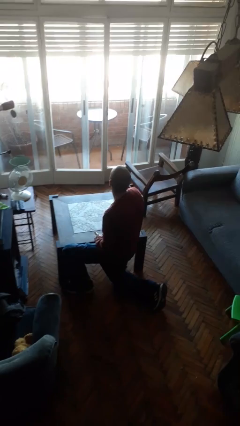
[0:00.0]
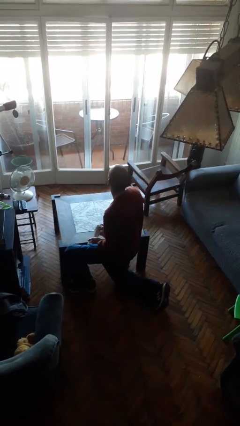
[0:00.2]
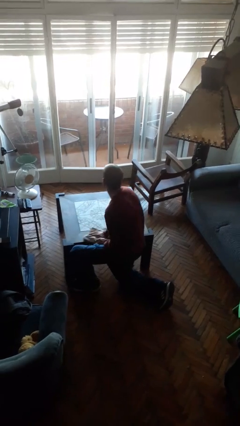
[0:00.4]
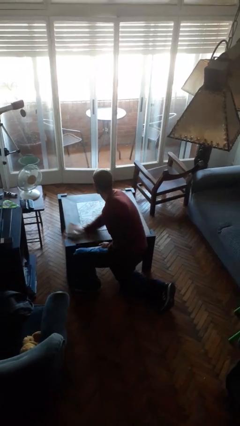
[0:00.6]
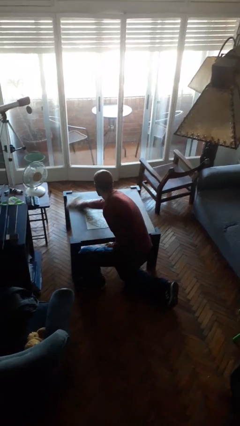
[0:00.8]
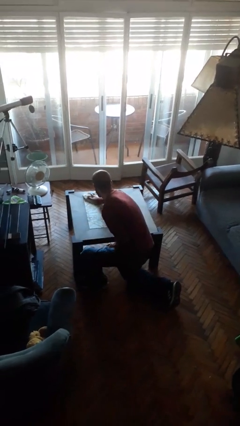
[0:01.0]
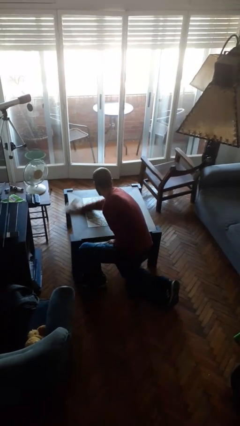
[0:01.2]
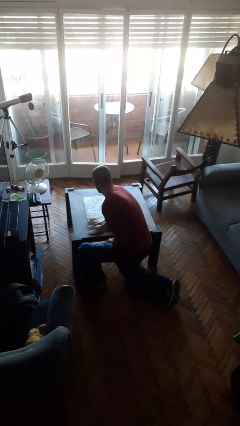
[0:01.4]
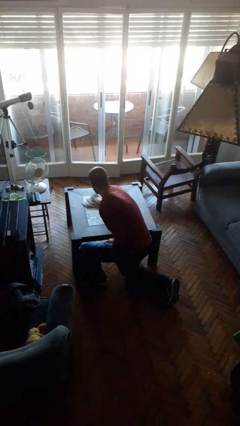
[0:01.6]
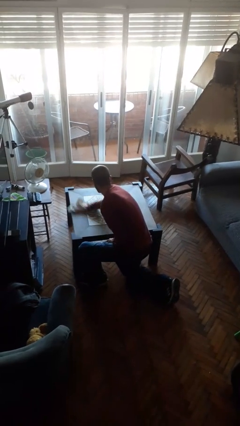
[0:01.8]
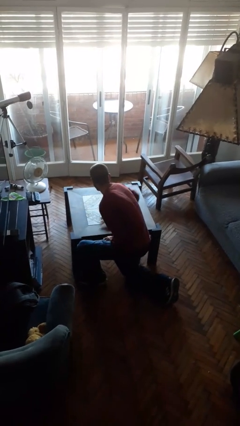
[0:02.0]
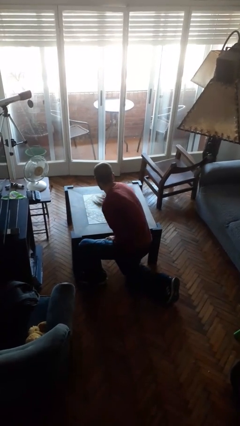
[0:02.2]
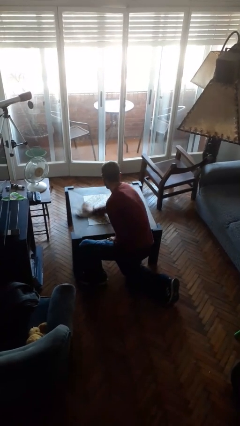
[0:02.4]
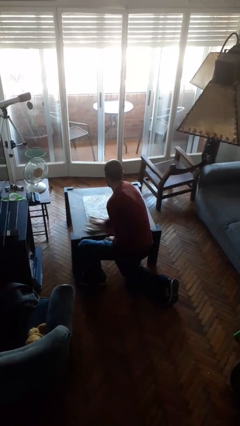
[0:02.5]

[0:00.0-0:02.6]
person cleans table with rag

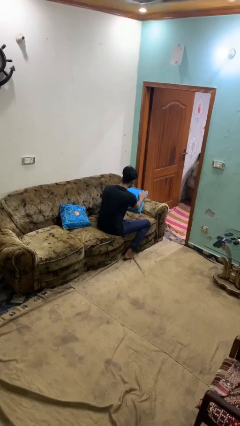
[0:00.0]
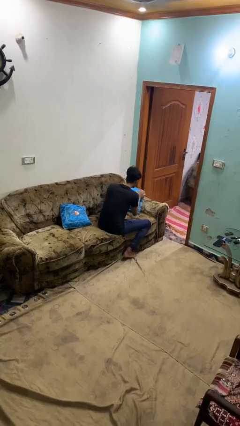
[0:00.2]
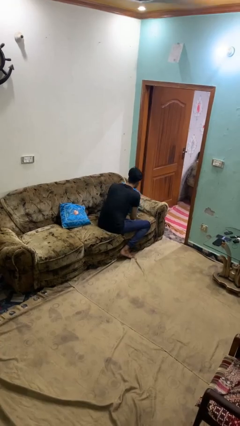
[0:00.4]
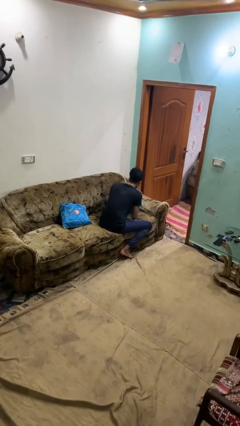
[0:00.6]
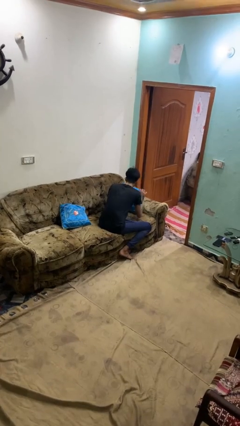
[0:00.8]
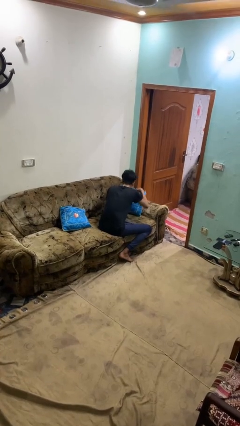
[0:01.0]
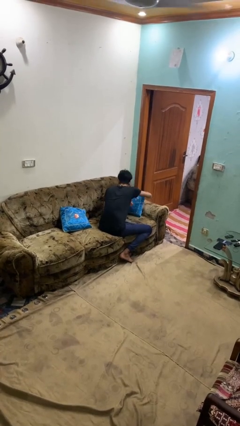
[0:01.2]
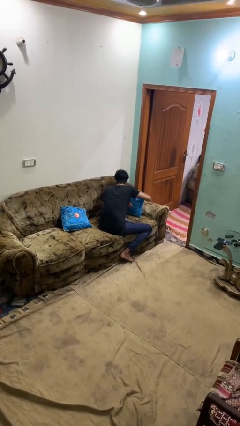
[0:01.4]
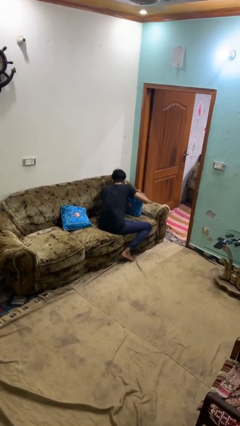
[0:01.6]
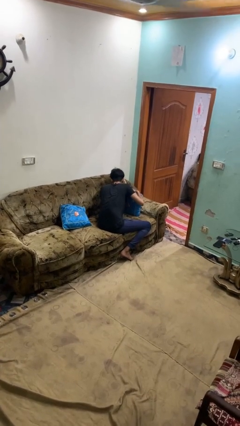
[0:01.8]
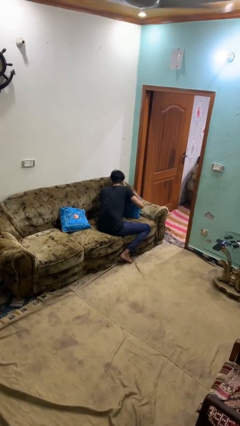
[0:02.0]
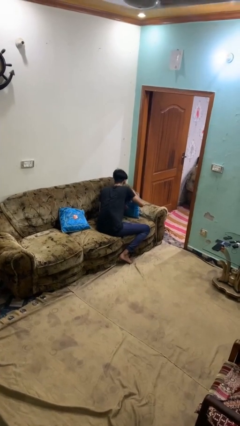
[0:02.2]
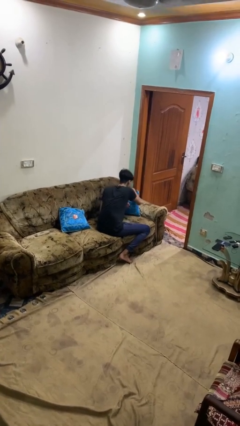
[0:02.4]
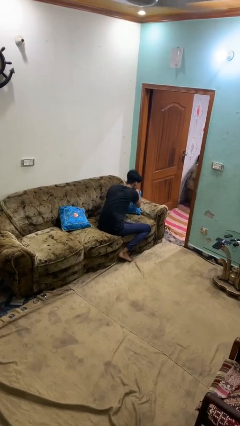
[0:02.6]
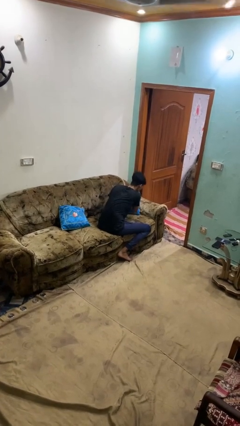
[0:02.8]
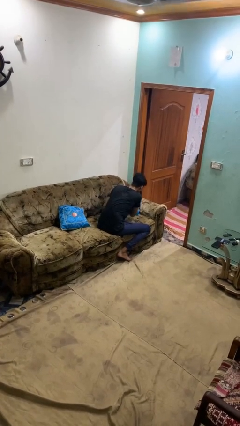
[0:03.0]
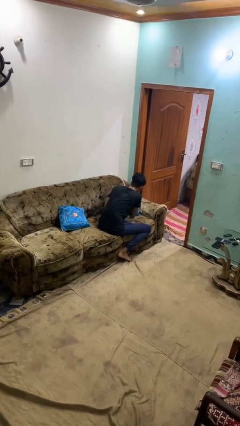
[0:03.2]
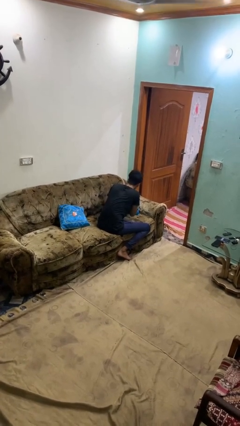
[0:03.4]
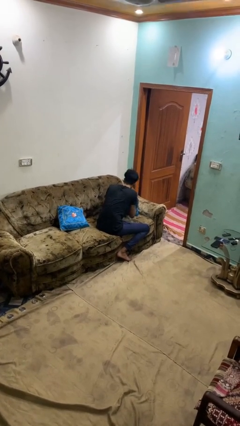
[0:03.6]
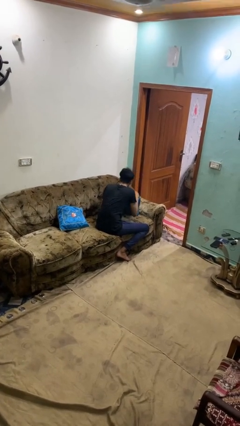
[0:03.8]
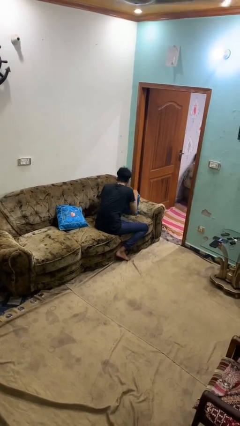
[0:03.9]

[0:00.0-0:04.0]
person searches in couch

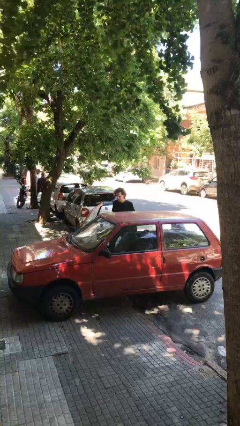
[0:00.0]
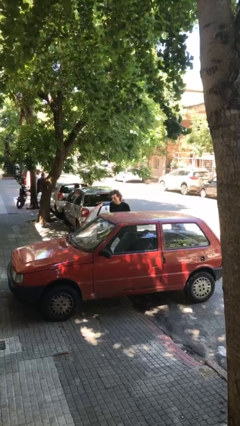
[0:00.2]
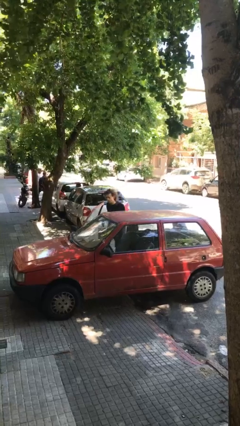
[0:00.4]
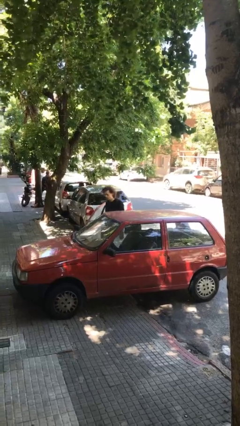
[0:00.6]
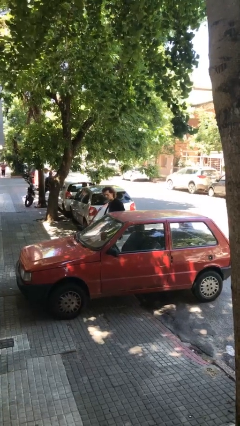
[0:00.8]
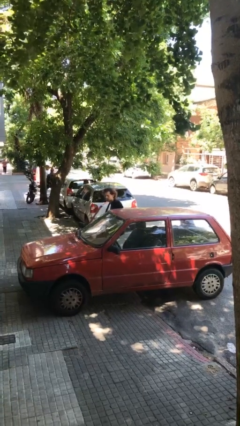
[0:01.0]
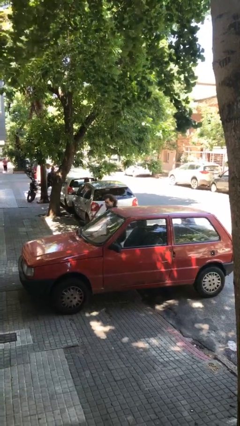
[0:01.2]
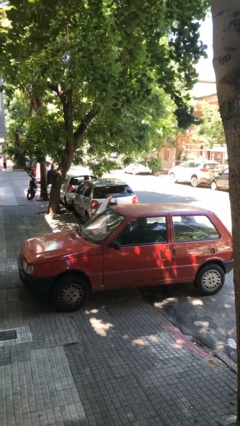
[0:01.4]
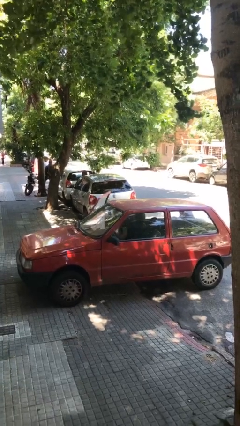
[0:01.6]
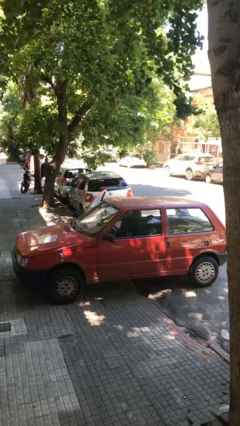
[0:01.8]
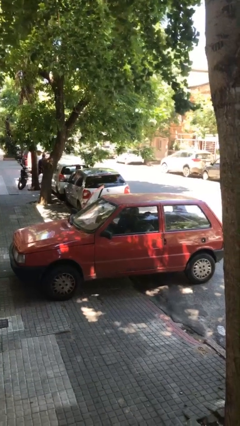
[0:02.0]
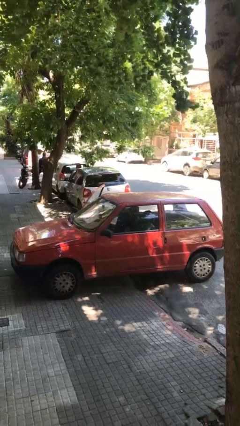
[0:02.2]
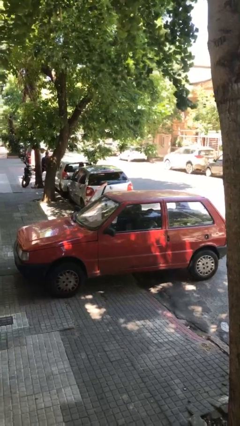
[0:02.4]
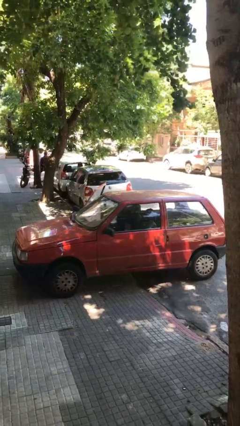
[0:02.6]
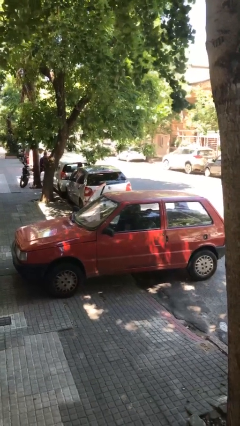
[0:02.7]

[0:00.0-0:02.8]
person enters car

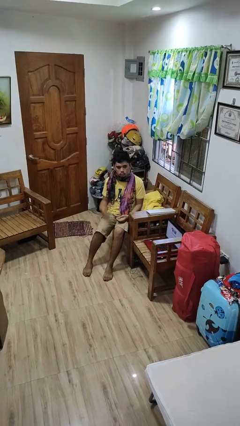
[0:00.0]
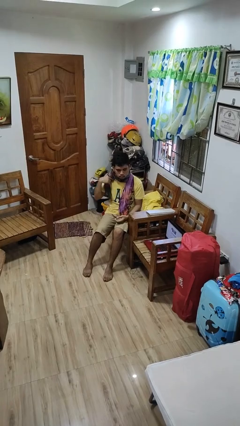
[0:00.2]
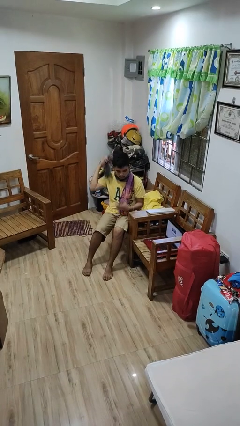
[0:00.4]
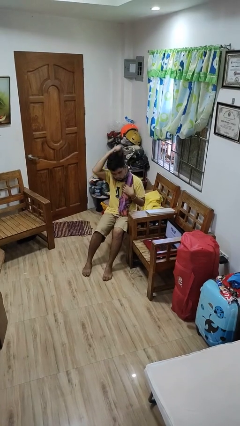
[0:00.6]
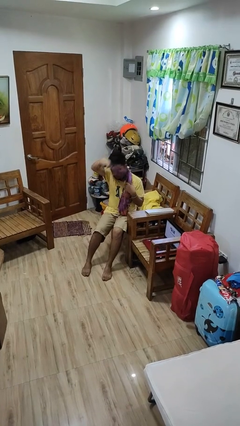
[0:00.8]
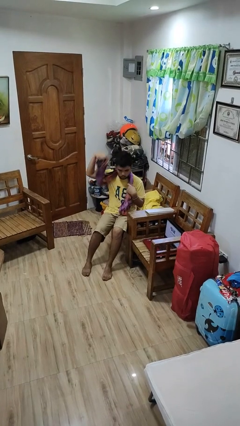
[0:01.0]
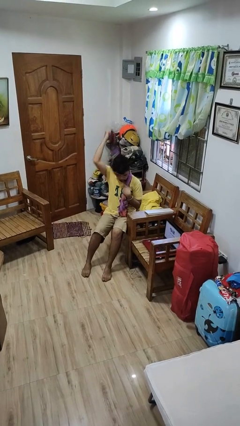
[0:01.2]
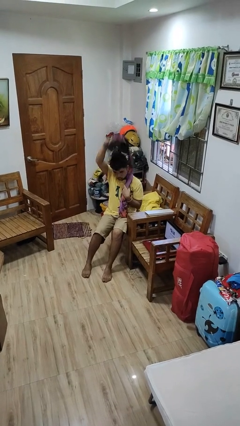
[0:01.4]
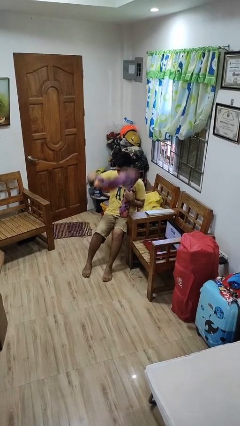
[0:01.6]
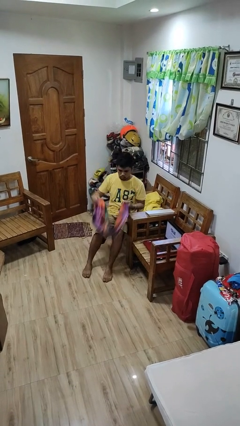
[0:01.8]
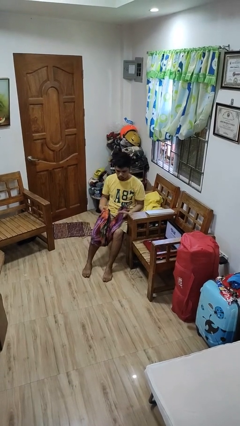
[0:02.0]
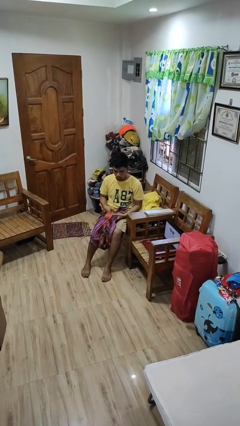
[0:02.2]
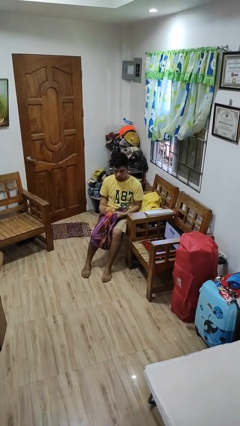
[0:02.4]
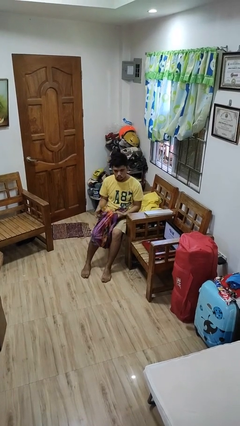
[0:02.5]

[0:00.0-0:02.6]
person takes off scarf

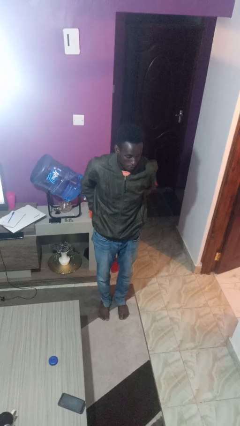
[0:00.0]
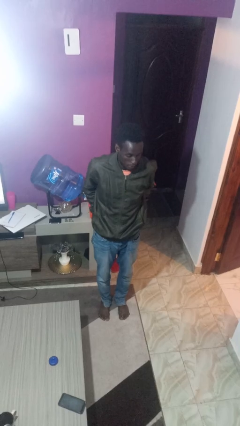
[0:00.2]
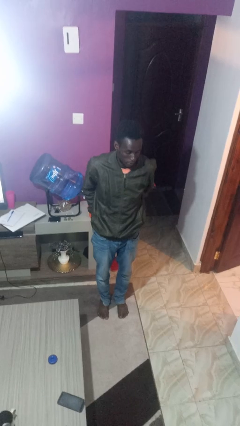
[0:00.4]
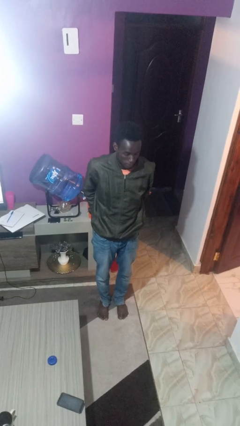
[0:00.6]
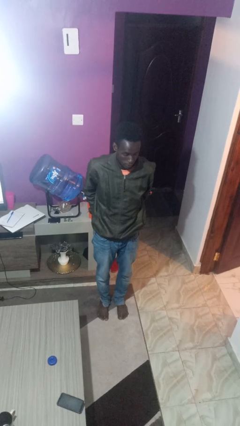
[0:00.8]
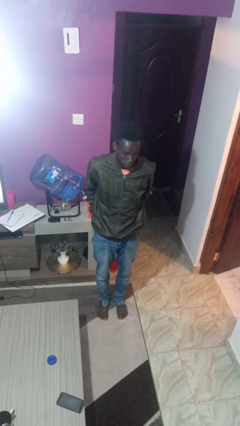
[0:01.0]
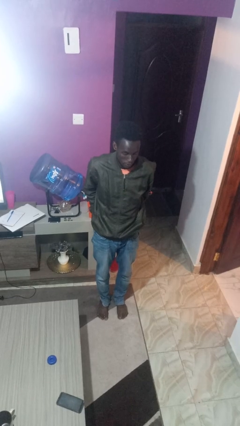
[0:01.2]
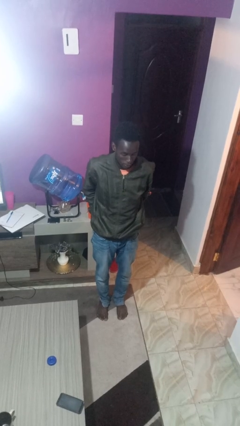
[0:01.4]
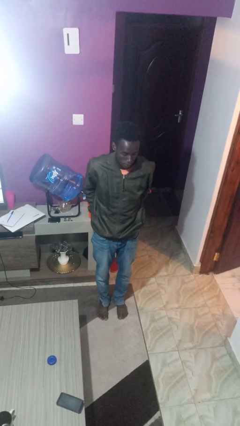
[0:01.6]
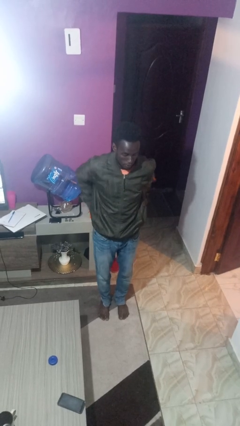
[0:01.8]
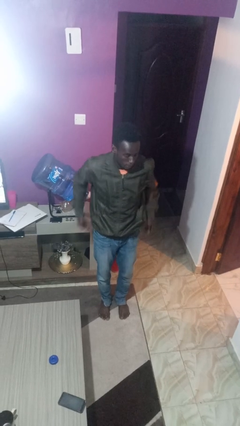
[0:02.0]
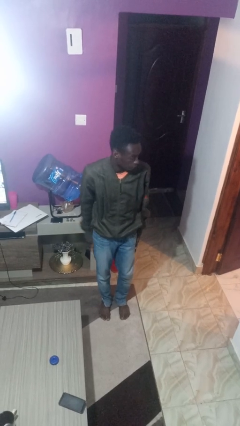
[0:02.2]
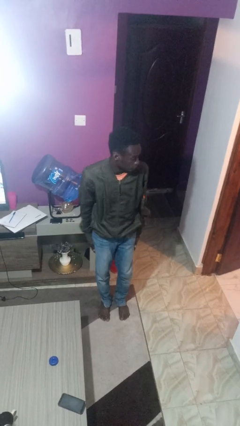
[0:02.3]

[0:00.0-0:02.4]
person puts hands in back pockets

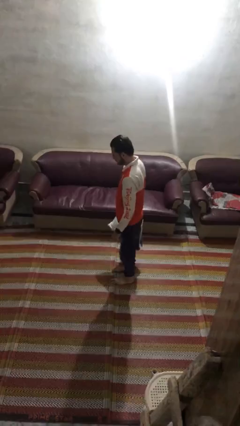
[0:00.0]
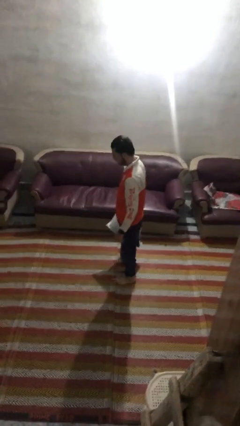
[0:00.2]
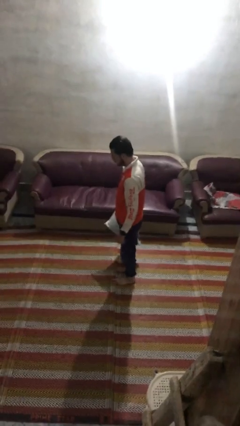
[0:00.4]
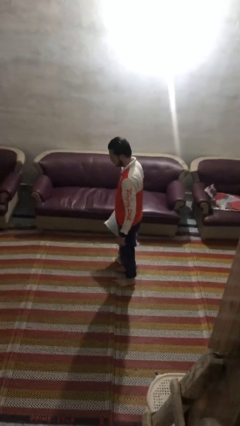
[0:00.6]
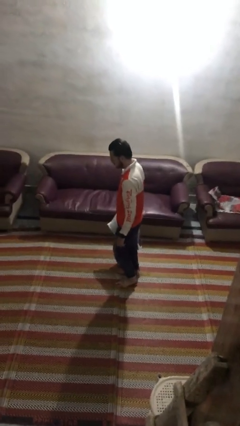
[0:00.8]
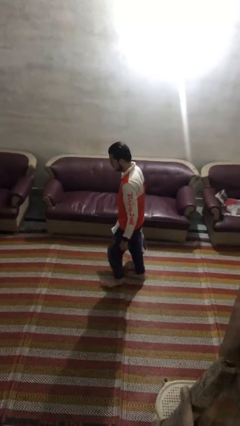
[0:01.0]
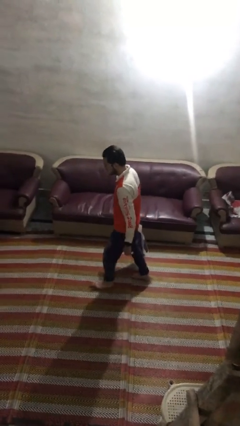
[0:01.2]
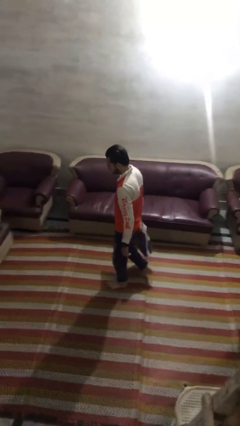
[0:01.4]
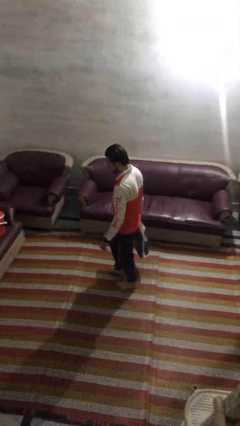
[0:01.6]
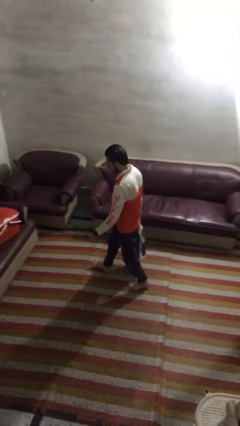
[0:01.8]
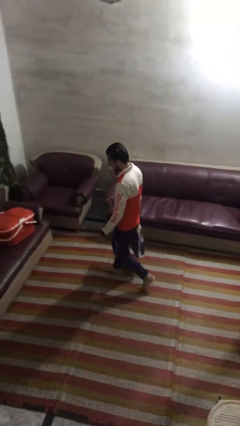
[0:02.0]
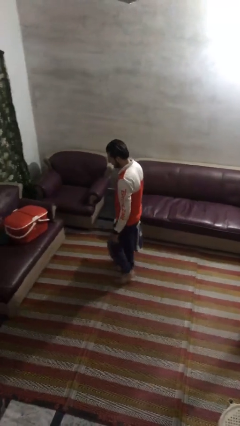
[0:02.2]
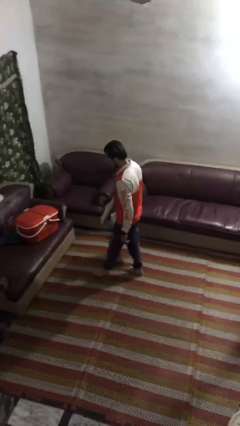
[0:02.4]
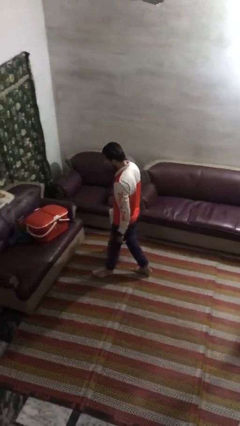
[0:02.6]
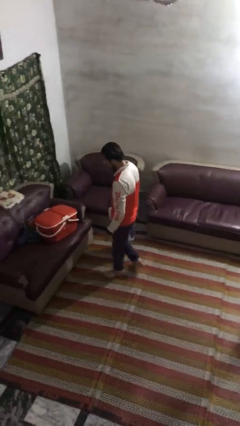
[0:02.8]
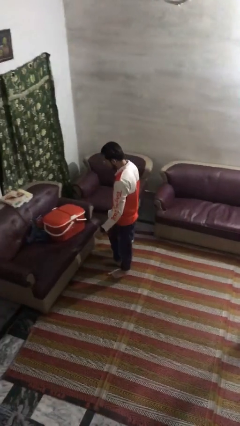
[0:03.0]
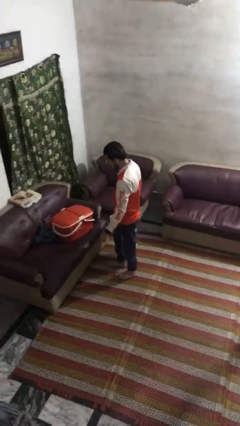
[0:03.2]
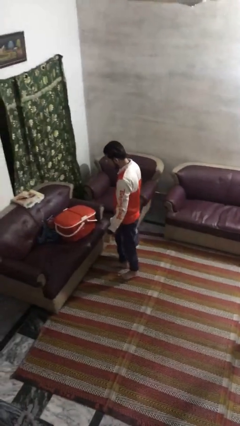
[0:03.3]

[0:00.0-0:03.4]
person carries groceries
